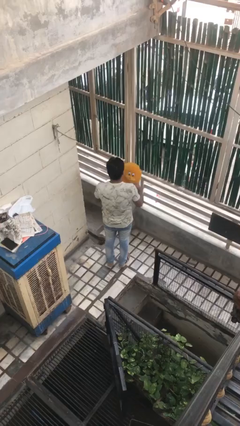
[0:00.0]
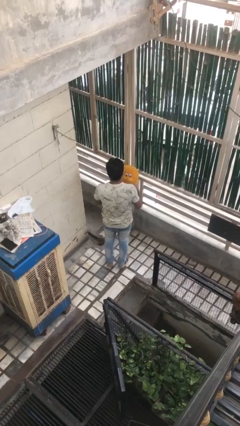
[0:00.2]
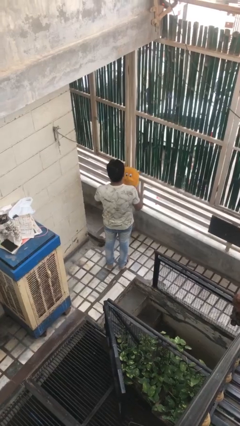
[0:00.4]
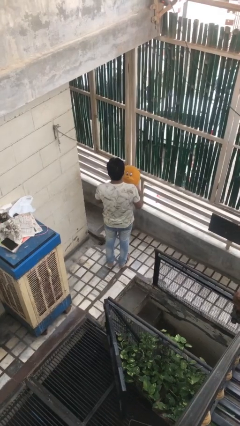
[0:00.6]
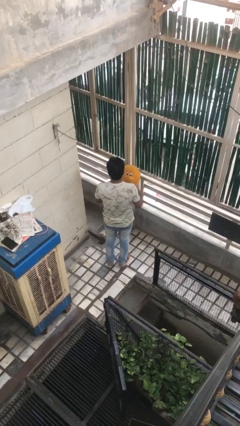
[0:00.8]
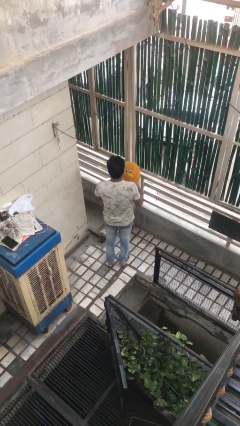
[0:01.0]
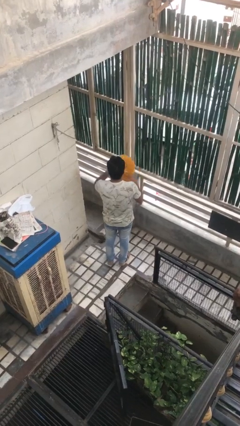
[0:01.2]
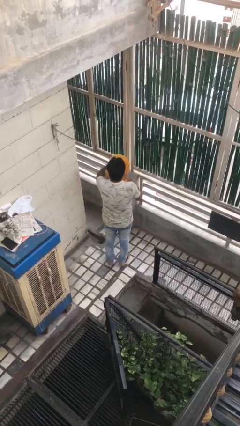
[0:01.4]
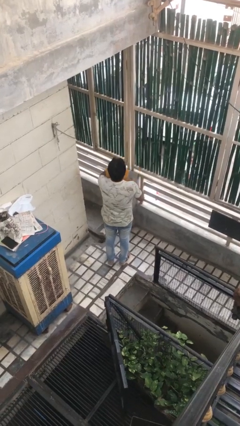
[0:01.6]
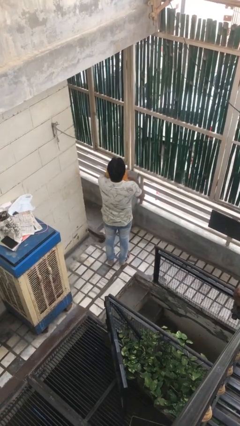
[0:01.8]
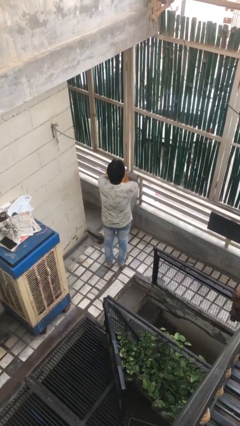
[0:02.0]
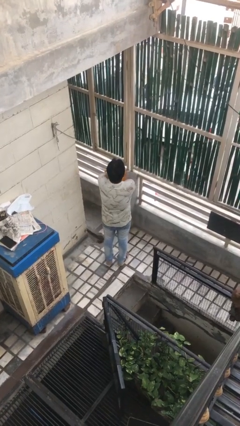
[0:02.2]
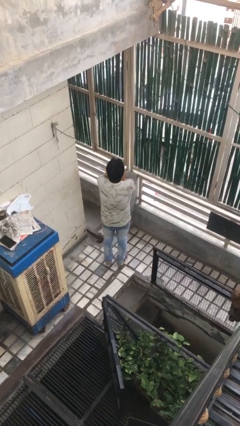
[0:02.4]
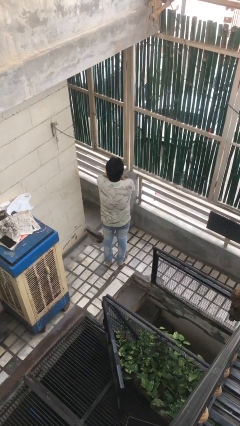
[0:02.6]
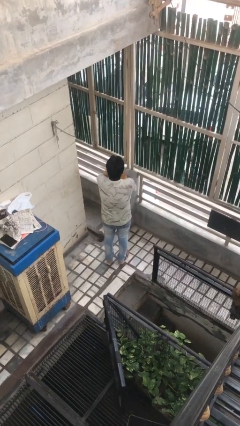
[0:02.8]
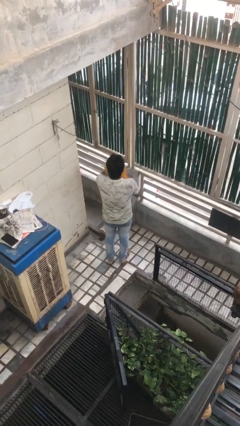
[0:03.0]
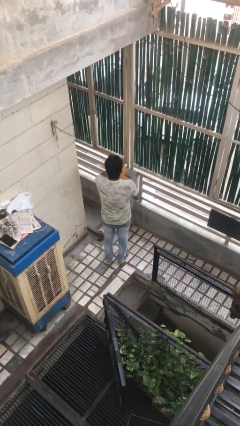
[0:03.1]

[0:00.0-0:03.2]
person hugs stuffed animal

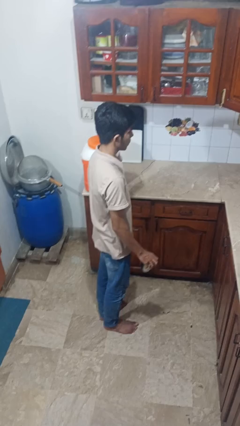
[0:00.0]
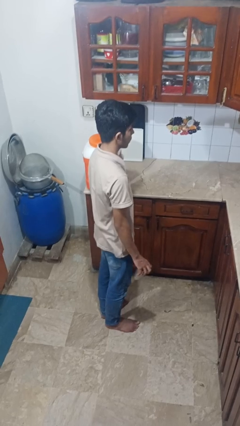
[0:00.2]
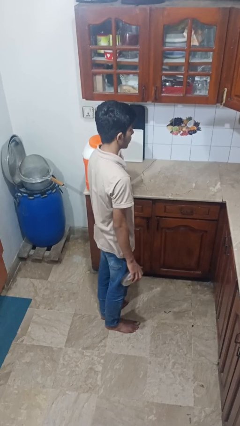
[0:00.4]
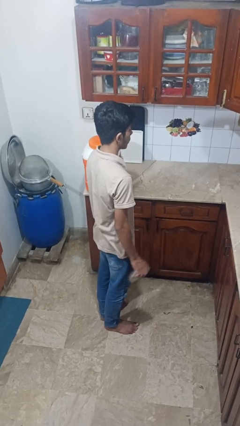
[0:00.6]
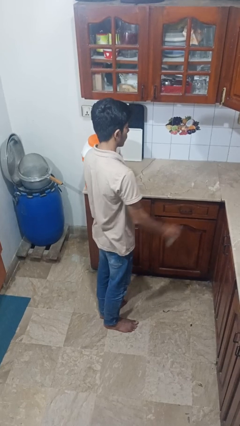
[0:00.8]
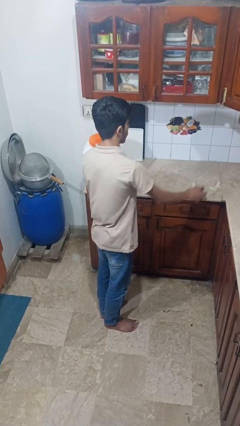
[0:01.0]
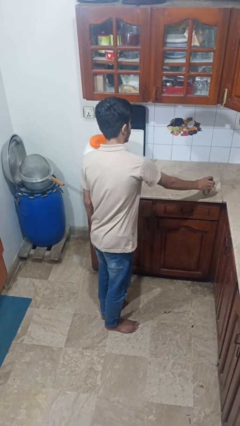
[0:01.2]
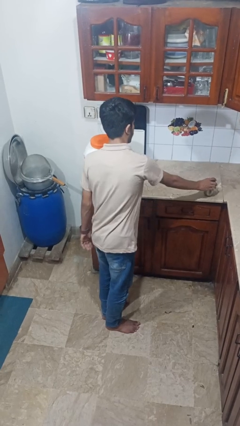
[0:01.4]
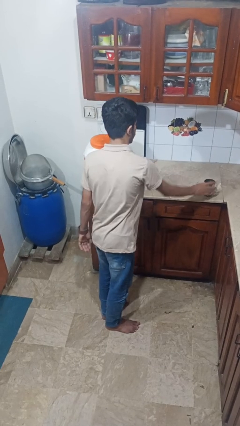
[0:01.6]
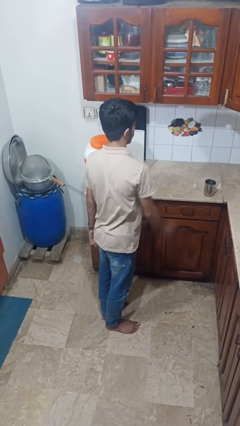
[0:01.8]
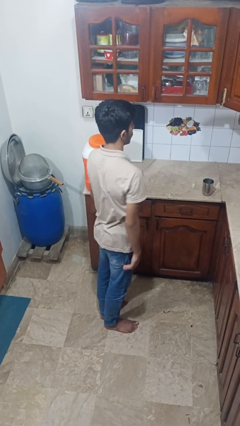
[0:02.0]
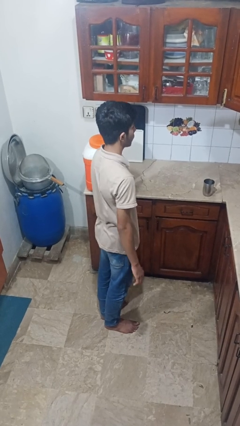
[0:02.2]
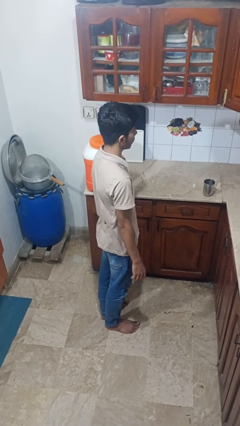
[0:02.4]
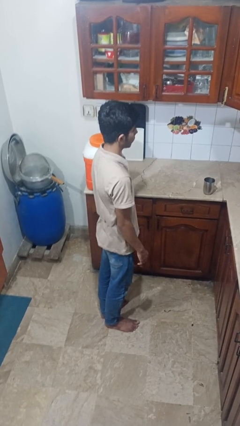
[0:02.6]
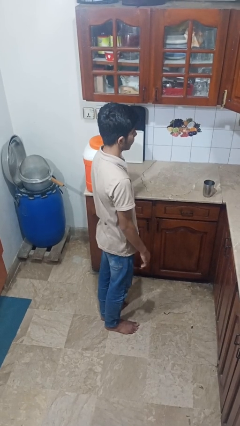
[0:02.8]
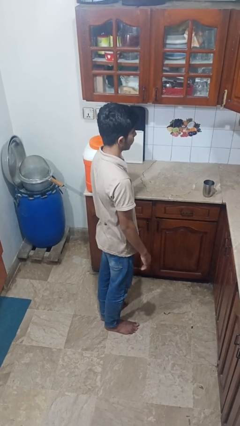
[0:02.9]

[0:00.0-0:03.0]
person puts down object on countertop

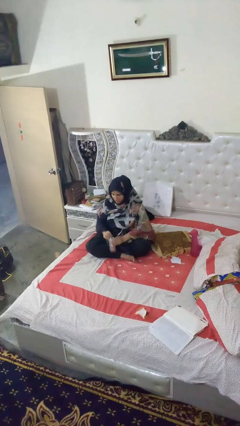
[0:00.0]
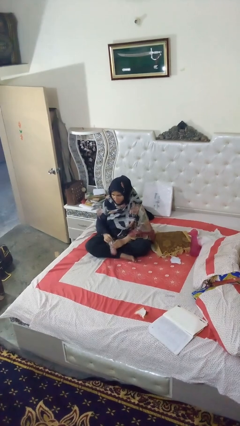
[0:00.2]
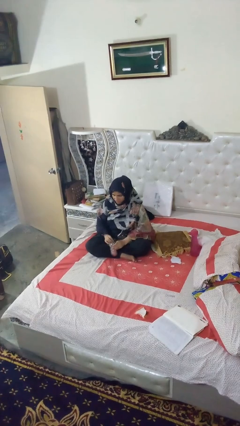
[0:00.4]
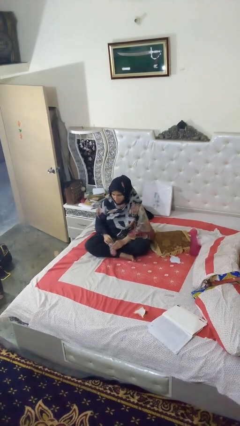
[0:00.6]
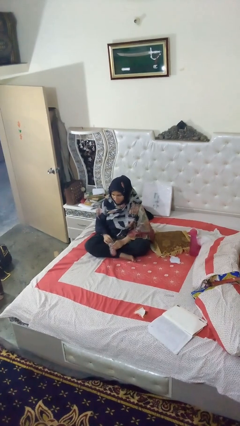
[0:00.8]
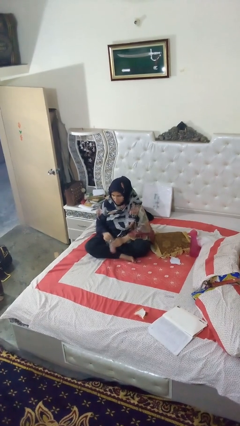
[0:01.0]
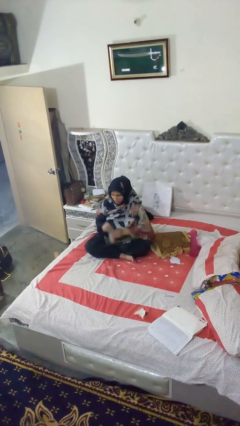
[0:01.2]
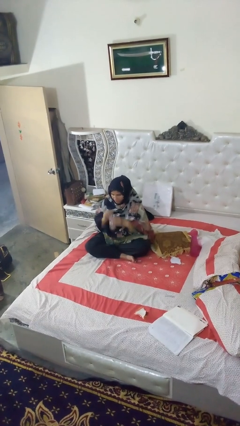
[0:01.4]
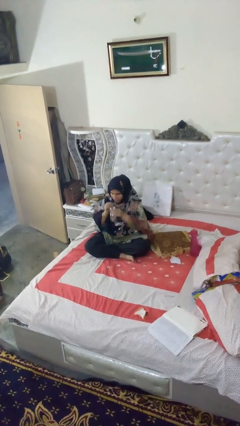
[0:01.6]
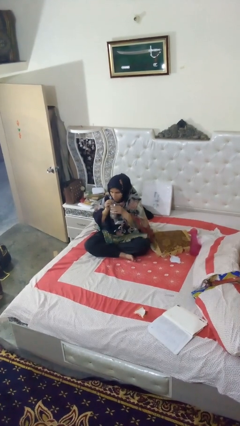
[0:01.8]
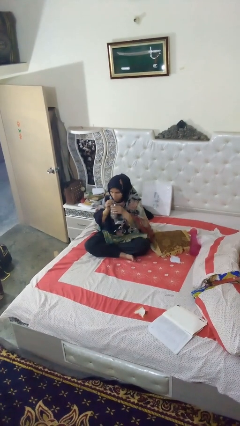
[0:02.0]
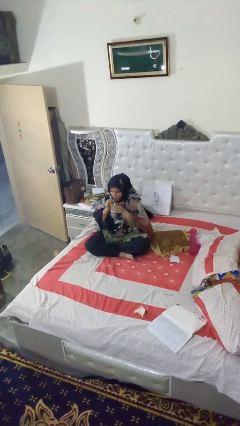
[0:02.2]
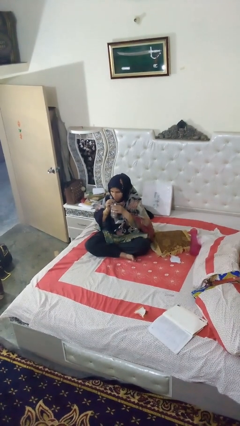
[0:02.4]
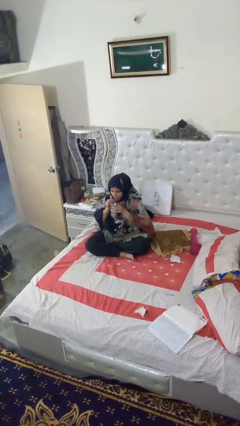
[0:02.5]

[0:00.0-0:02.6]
person drinks from straw

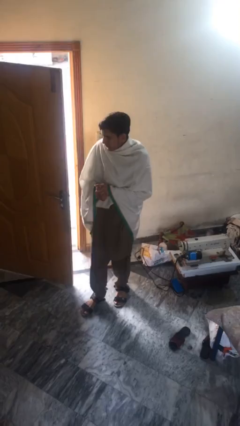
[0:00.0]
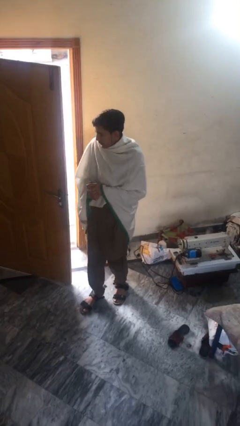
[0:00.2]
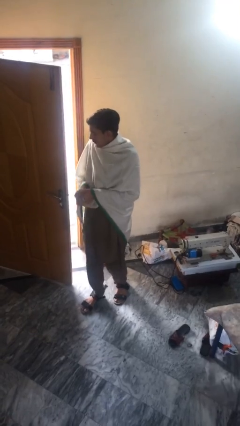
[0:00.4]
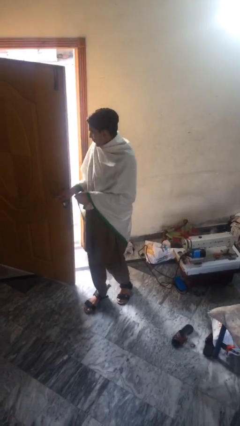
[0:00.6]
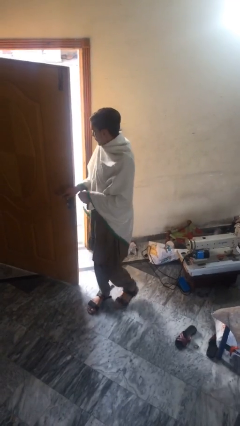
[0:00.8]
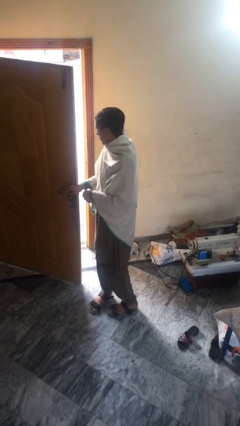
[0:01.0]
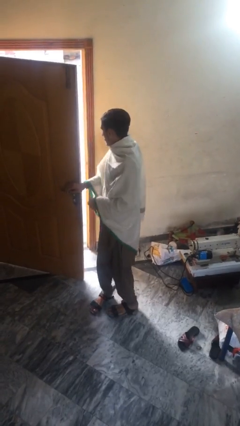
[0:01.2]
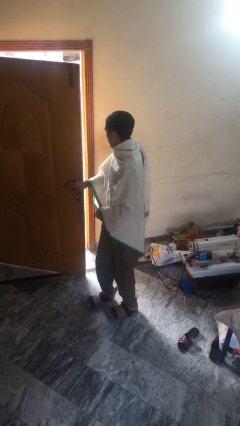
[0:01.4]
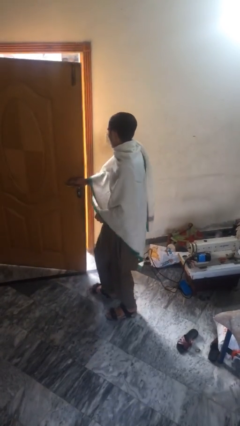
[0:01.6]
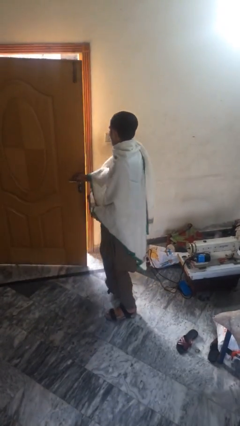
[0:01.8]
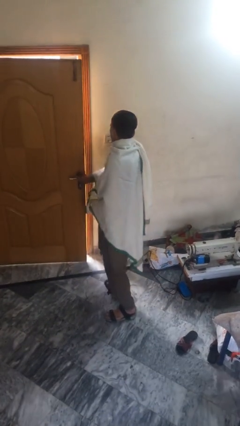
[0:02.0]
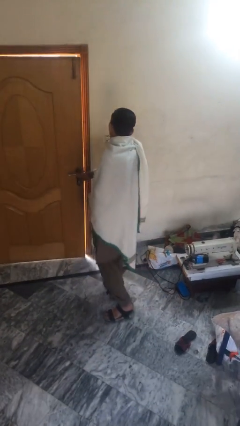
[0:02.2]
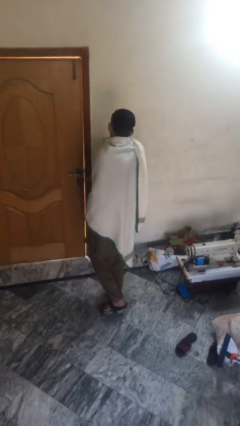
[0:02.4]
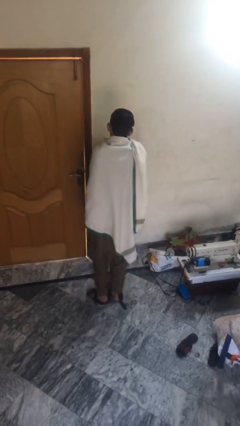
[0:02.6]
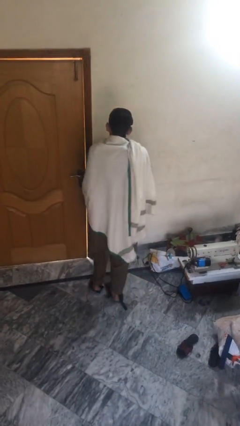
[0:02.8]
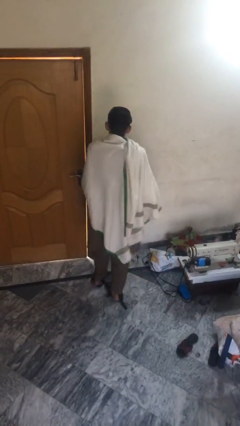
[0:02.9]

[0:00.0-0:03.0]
person closes facility door

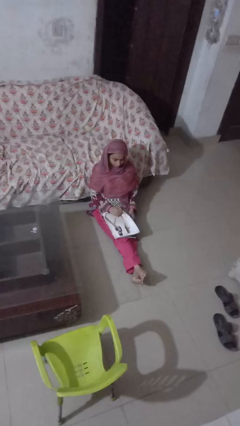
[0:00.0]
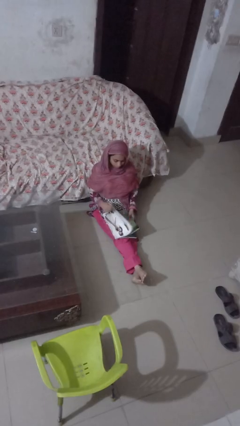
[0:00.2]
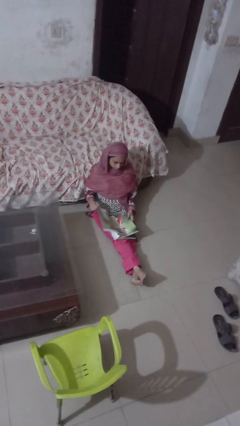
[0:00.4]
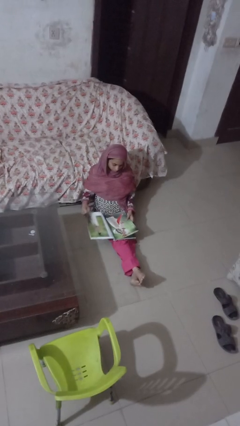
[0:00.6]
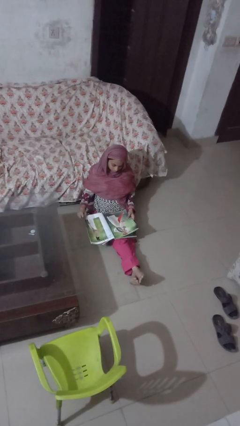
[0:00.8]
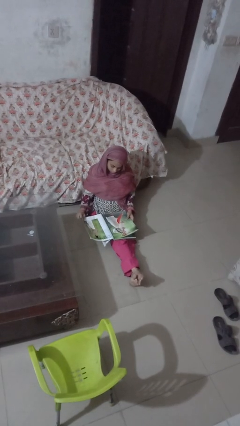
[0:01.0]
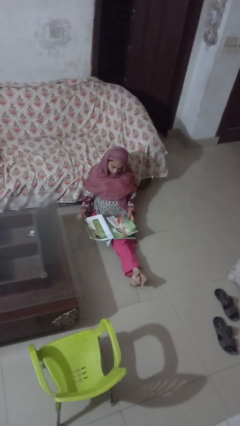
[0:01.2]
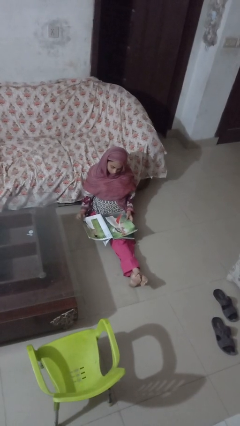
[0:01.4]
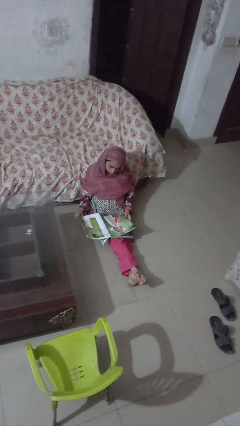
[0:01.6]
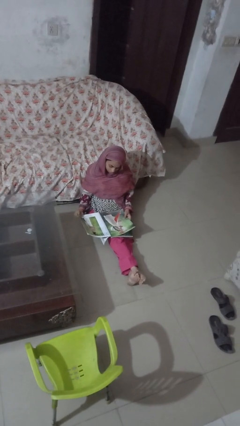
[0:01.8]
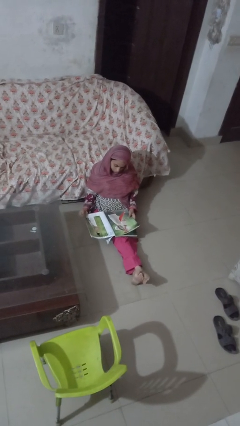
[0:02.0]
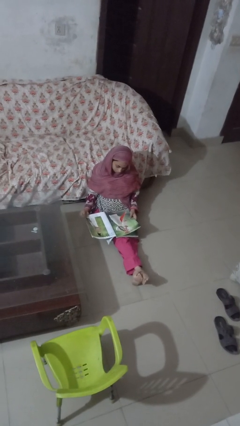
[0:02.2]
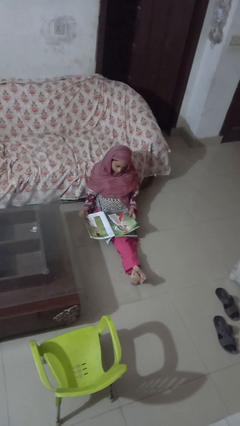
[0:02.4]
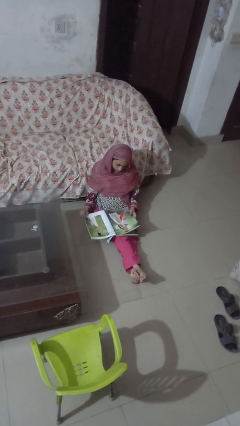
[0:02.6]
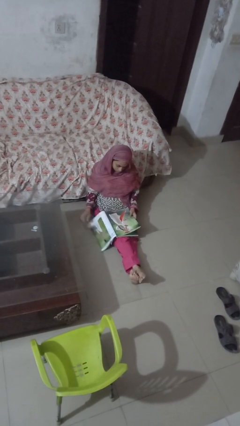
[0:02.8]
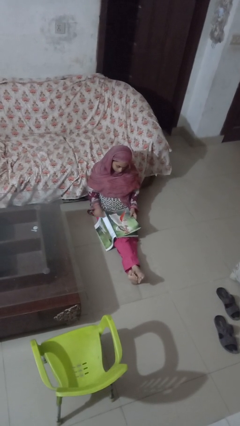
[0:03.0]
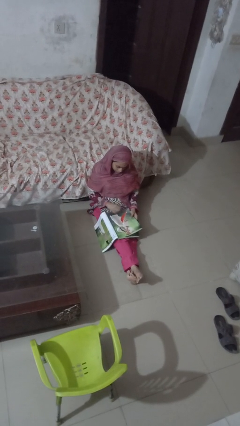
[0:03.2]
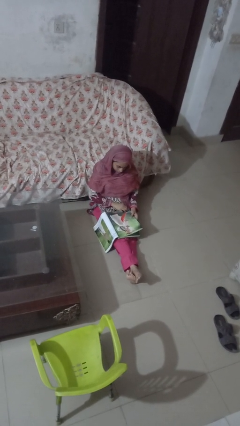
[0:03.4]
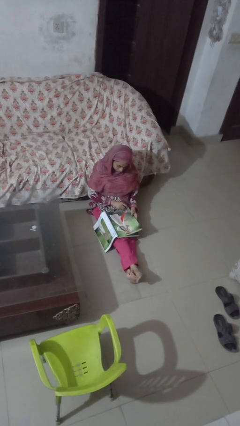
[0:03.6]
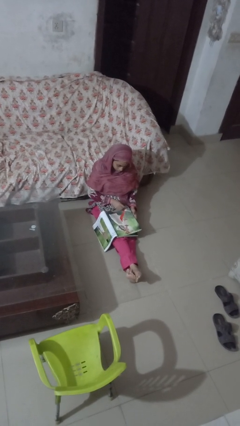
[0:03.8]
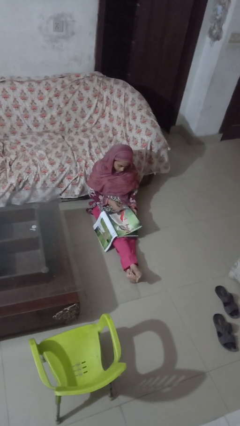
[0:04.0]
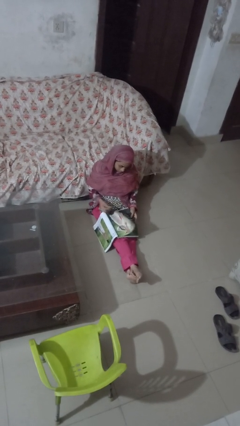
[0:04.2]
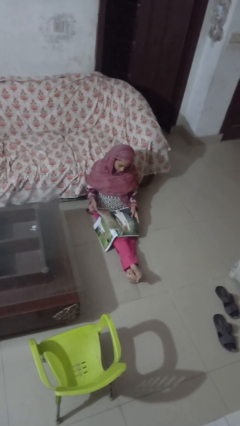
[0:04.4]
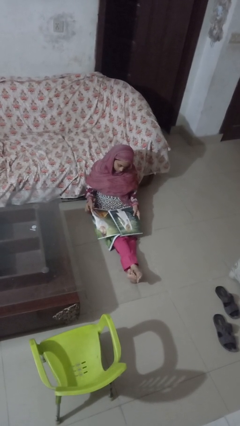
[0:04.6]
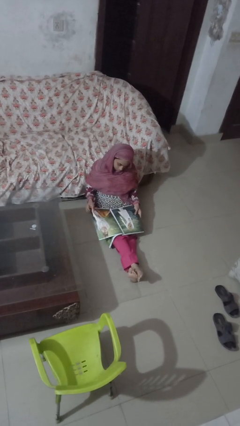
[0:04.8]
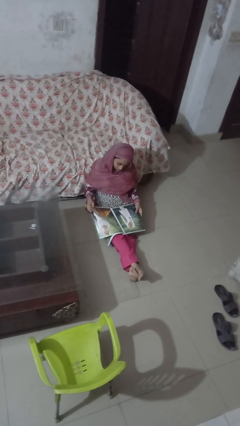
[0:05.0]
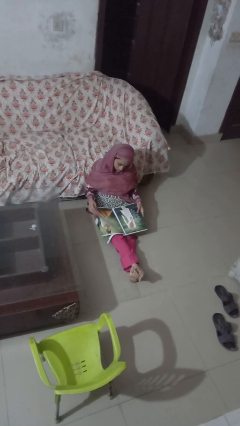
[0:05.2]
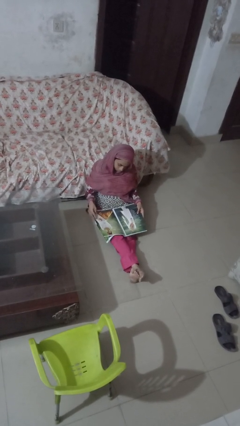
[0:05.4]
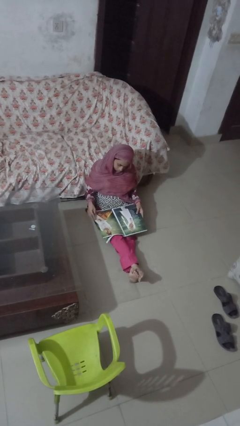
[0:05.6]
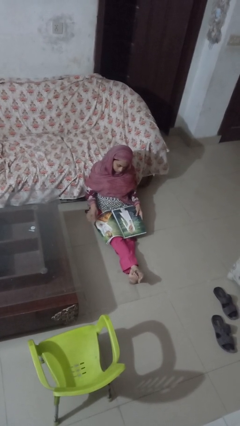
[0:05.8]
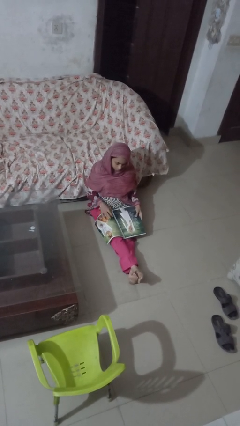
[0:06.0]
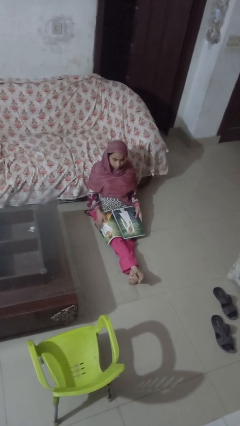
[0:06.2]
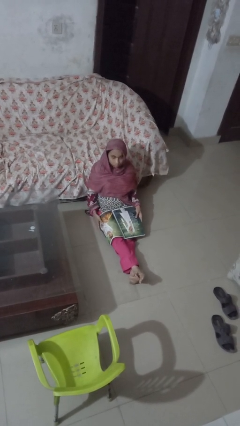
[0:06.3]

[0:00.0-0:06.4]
person reads magazine
